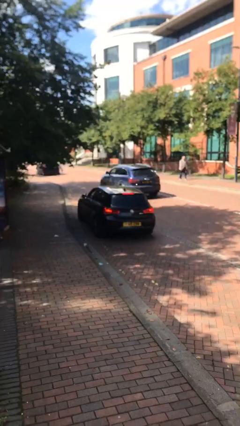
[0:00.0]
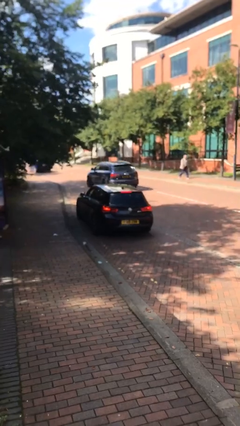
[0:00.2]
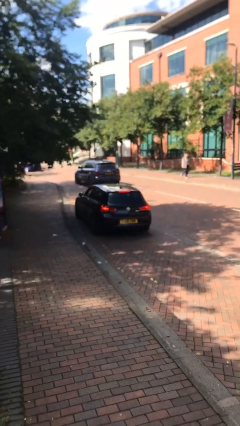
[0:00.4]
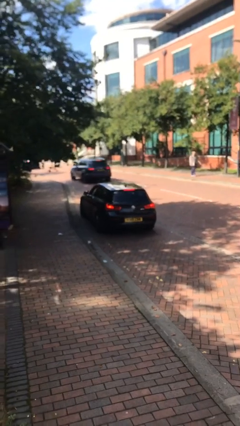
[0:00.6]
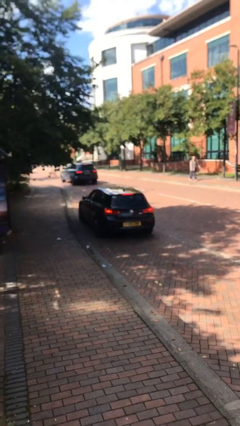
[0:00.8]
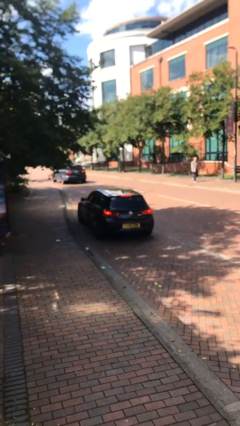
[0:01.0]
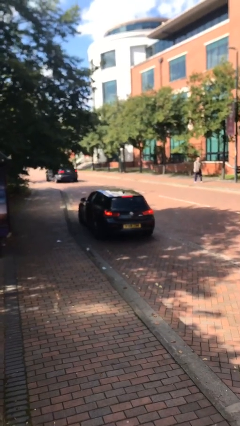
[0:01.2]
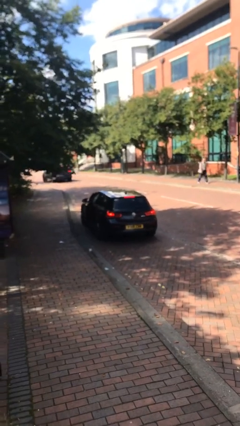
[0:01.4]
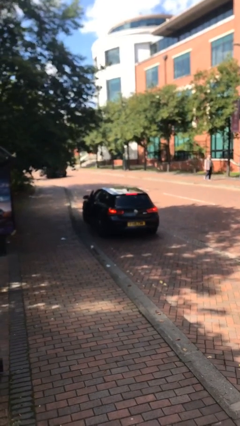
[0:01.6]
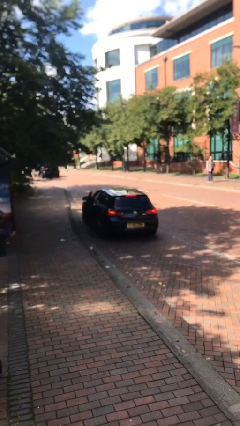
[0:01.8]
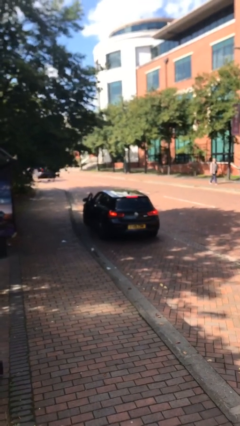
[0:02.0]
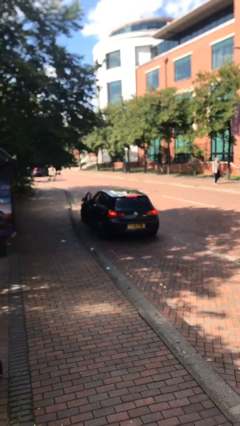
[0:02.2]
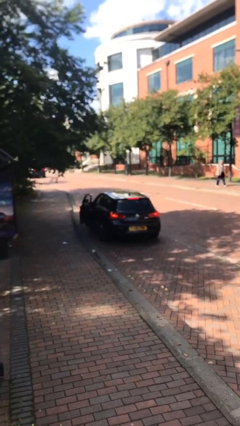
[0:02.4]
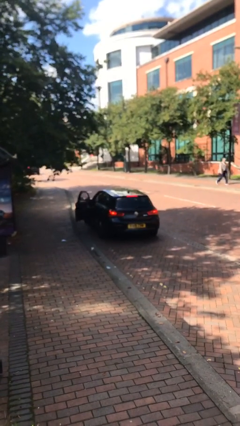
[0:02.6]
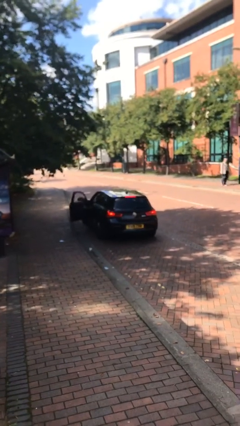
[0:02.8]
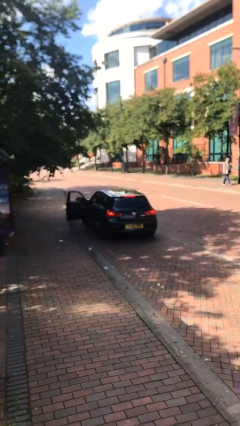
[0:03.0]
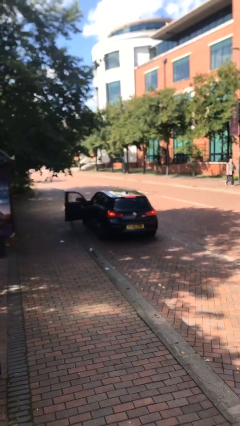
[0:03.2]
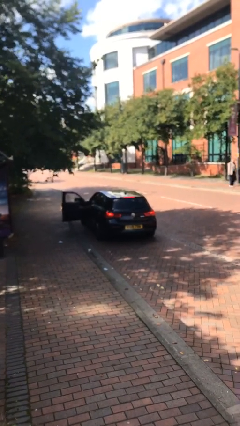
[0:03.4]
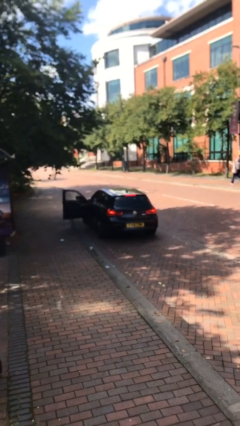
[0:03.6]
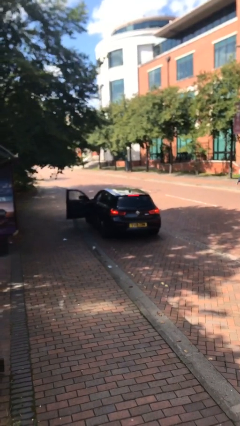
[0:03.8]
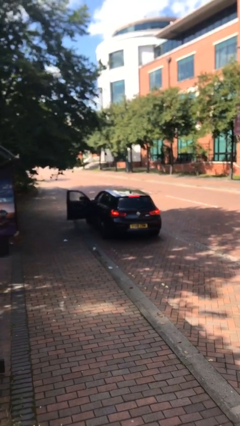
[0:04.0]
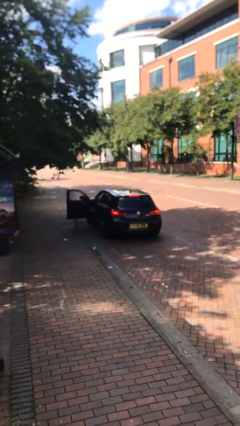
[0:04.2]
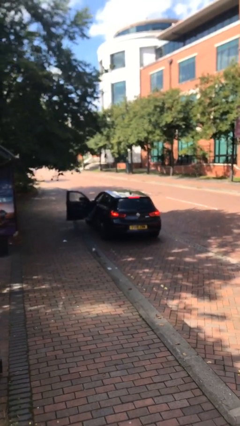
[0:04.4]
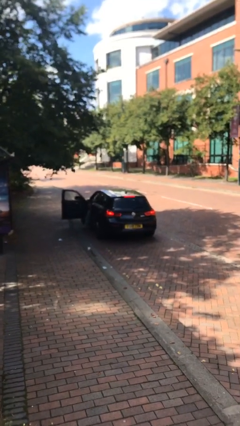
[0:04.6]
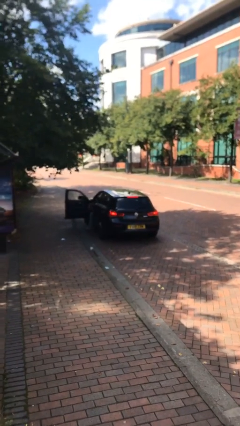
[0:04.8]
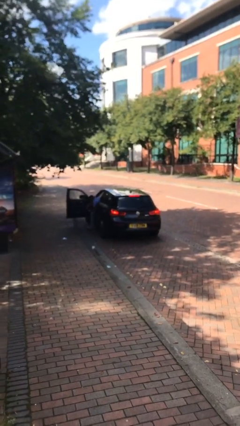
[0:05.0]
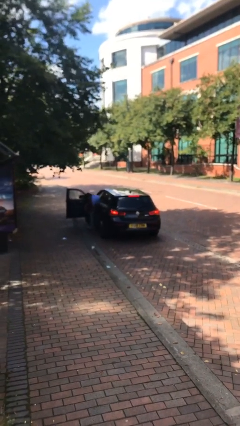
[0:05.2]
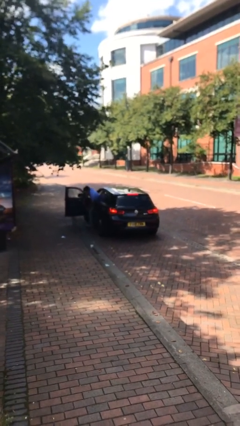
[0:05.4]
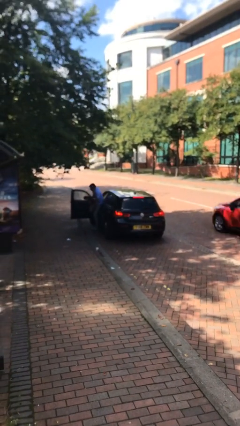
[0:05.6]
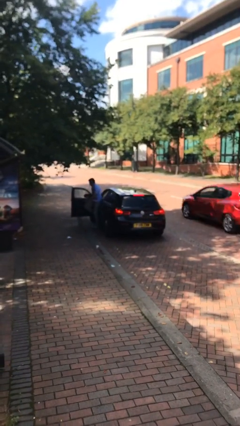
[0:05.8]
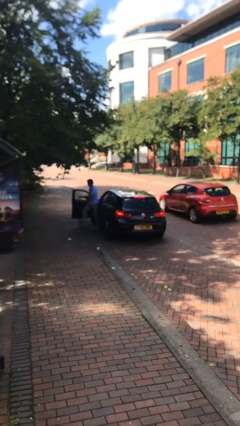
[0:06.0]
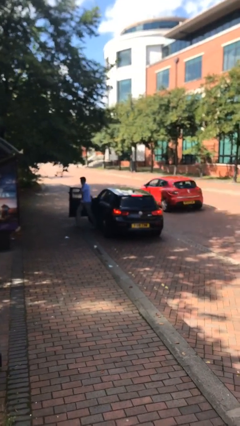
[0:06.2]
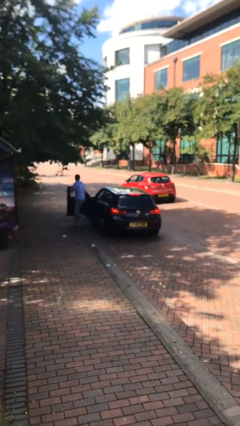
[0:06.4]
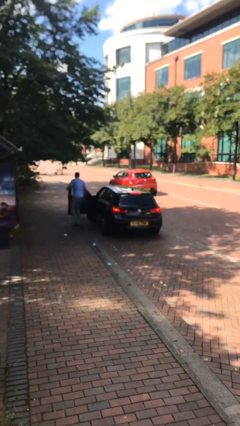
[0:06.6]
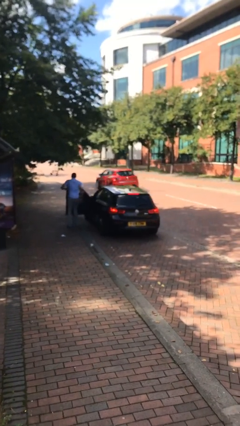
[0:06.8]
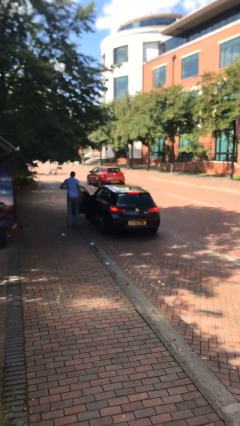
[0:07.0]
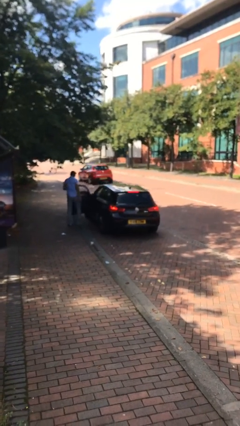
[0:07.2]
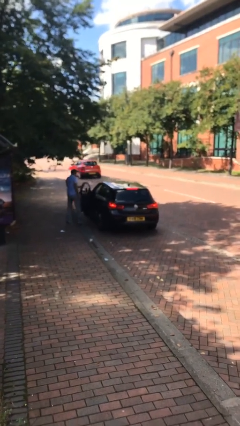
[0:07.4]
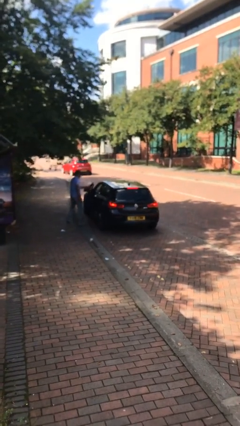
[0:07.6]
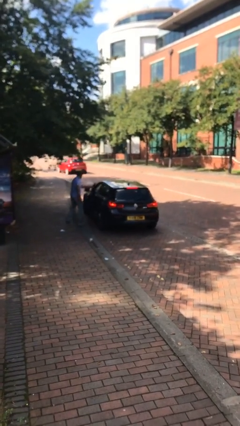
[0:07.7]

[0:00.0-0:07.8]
car drops off person

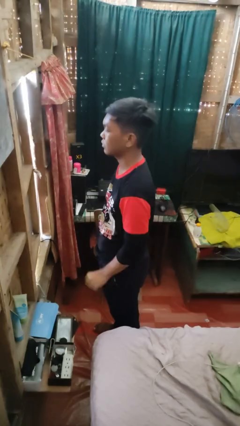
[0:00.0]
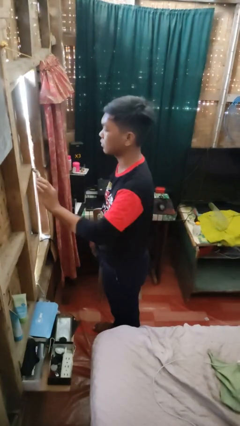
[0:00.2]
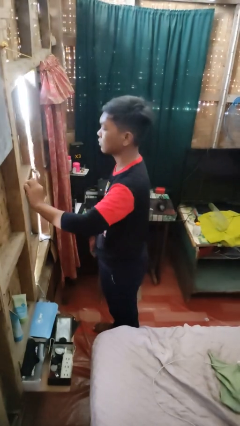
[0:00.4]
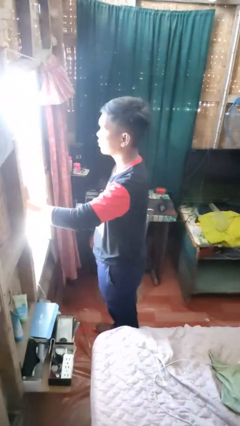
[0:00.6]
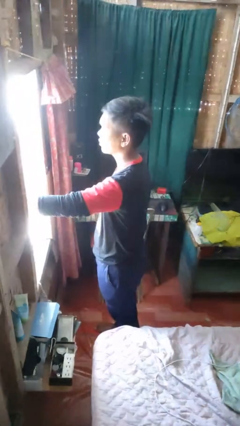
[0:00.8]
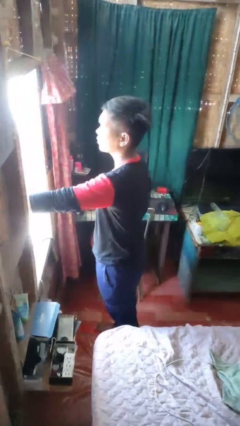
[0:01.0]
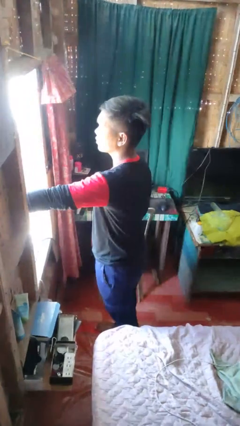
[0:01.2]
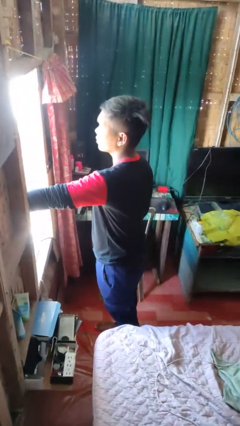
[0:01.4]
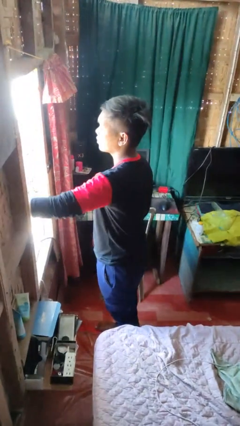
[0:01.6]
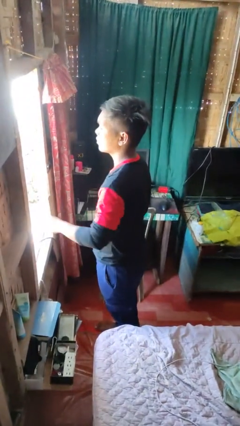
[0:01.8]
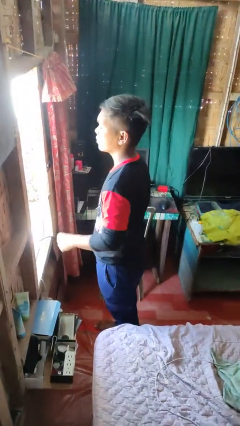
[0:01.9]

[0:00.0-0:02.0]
person opens home window

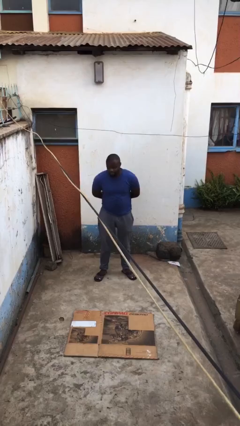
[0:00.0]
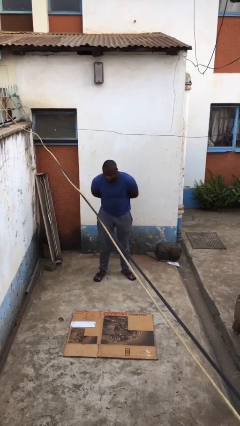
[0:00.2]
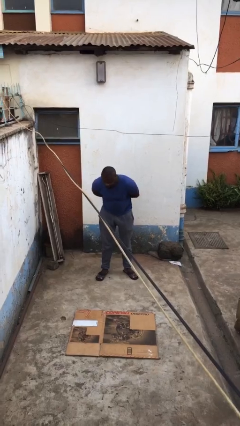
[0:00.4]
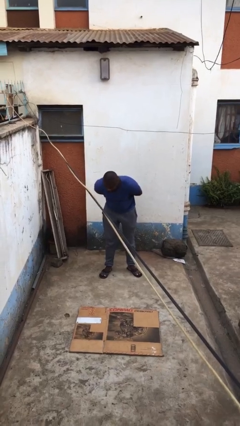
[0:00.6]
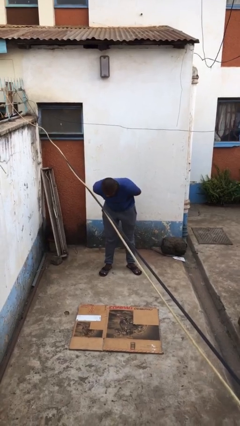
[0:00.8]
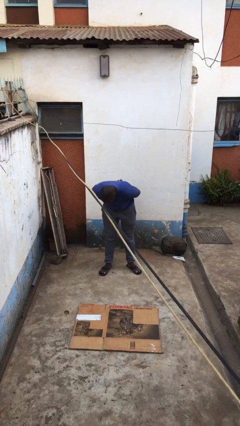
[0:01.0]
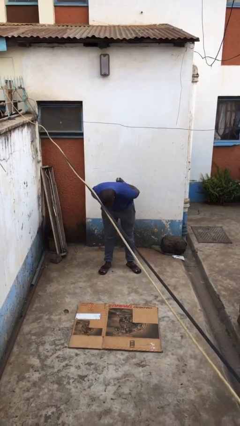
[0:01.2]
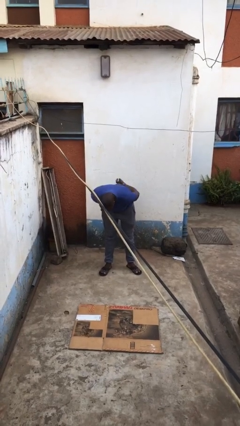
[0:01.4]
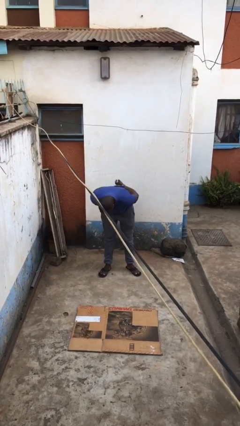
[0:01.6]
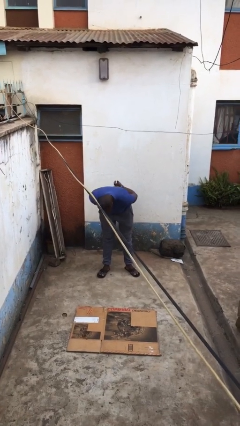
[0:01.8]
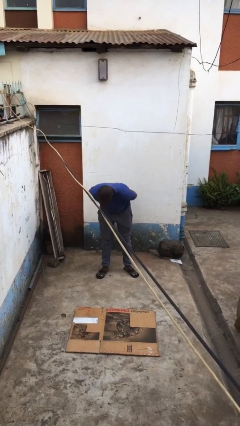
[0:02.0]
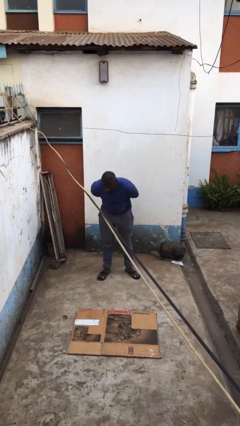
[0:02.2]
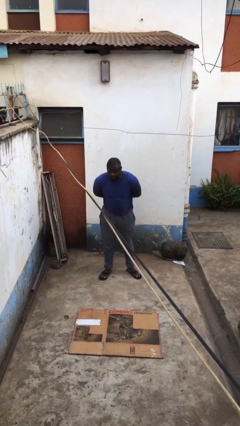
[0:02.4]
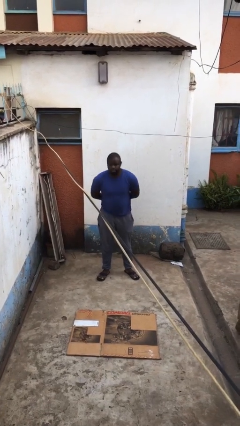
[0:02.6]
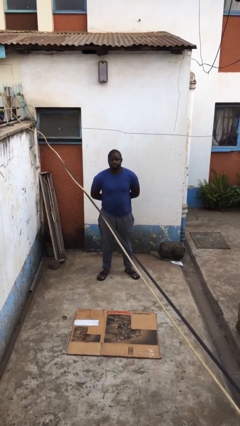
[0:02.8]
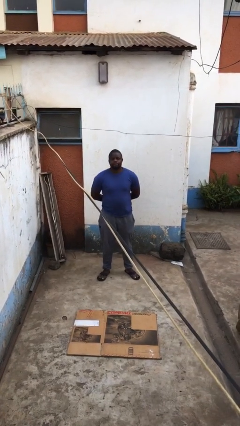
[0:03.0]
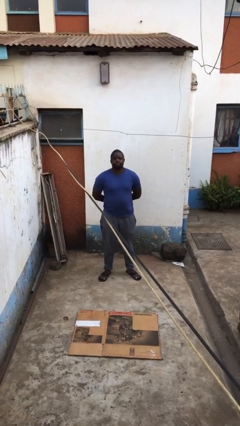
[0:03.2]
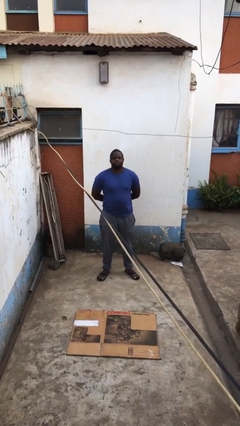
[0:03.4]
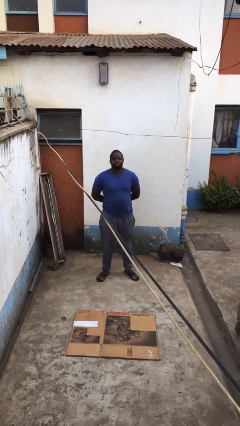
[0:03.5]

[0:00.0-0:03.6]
person bows

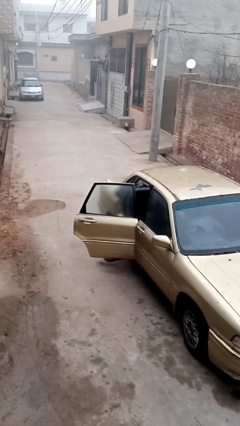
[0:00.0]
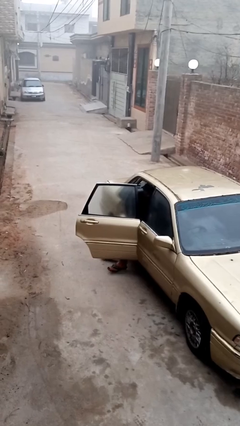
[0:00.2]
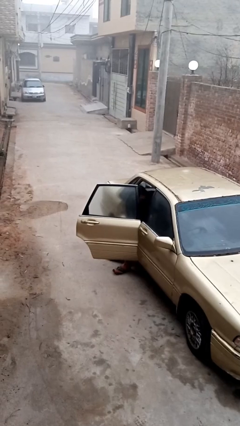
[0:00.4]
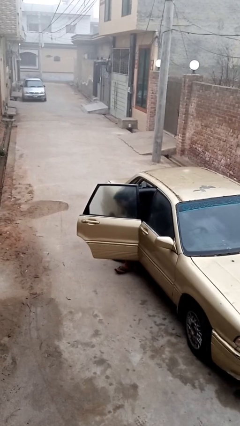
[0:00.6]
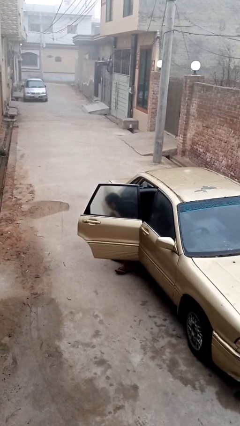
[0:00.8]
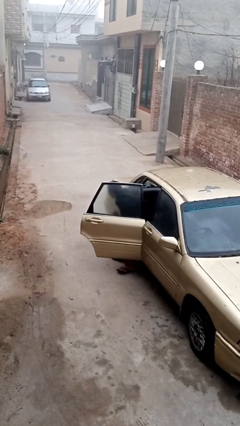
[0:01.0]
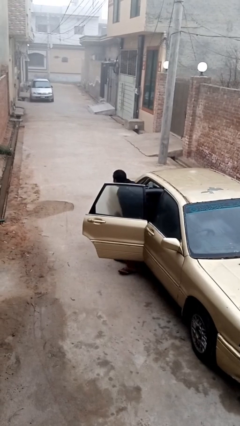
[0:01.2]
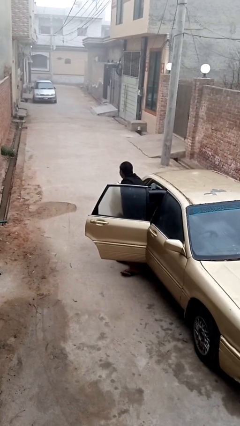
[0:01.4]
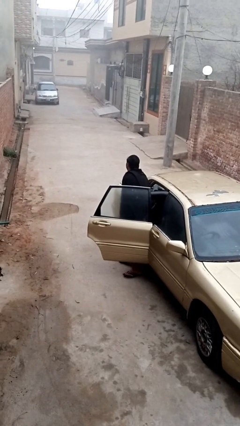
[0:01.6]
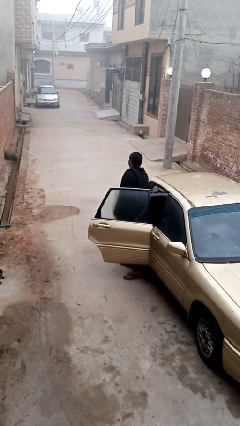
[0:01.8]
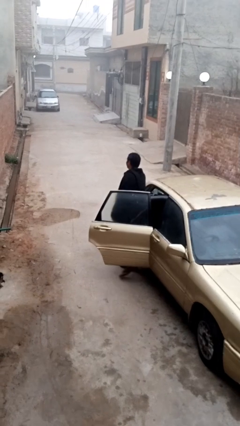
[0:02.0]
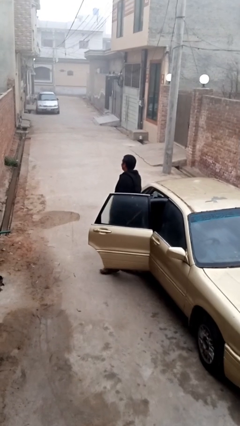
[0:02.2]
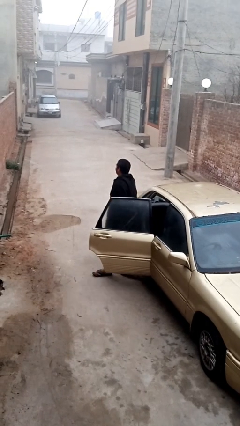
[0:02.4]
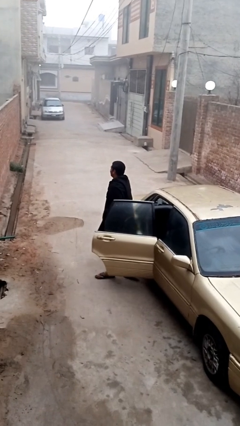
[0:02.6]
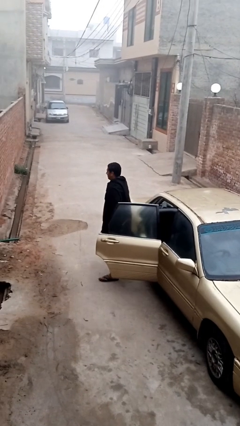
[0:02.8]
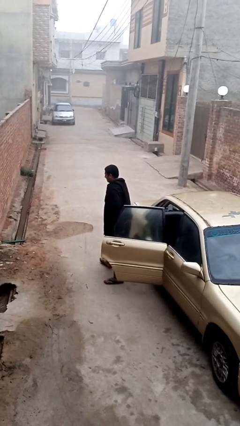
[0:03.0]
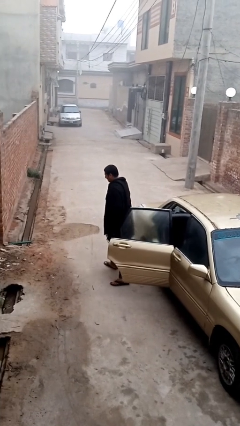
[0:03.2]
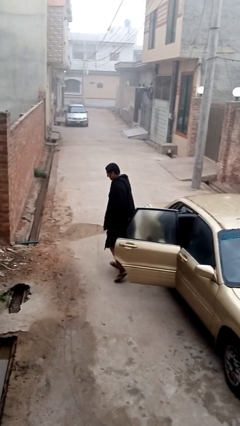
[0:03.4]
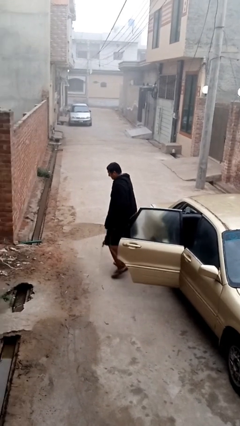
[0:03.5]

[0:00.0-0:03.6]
person exits car

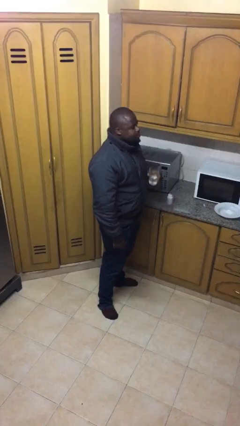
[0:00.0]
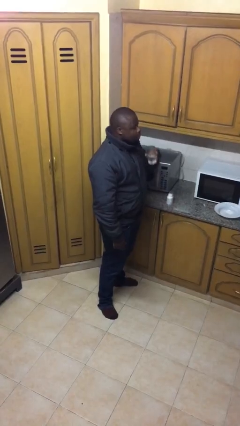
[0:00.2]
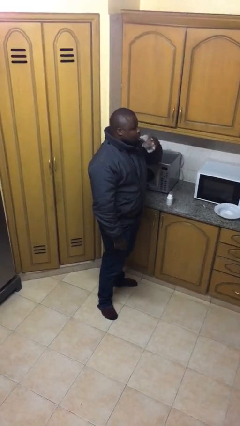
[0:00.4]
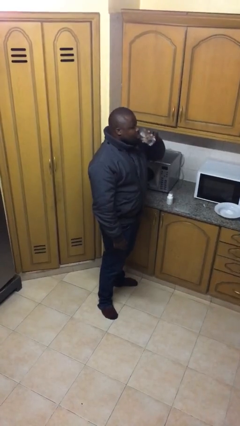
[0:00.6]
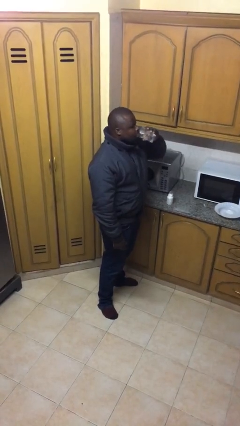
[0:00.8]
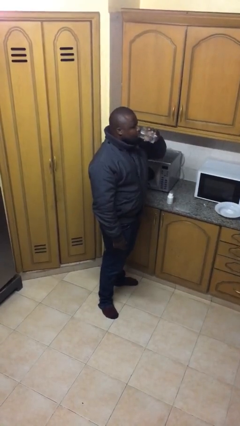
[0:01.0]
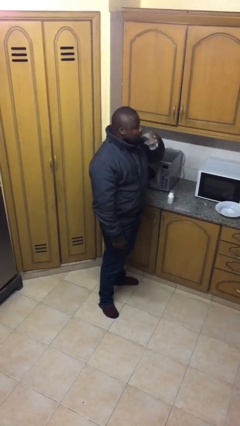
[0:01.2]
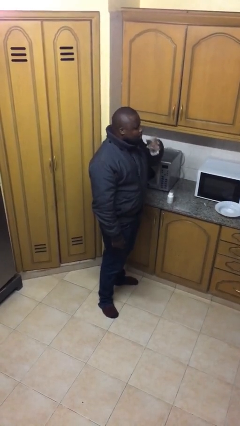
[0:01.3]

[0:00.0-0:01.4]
person drinks from cup
